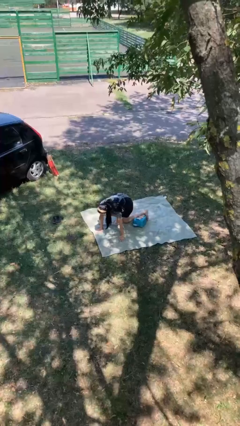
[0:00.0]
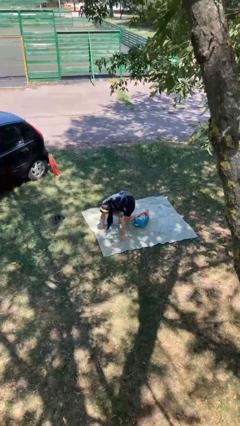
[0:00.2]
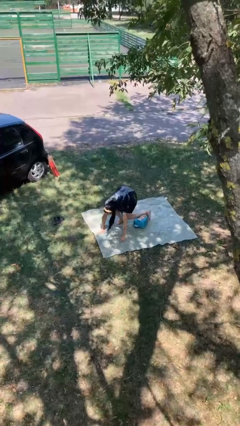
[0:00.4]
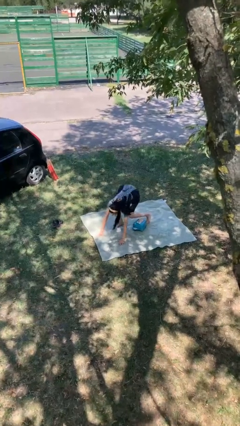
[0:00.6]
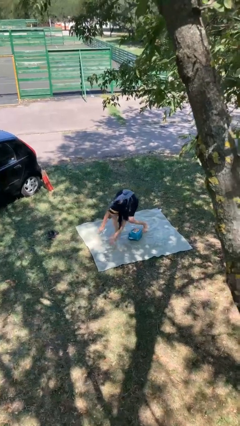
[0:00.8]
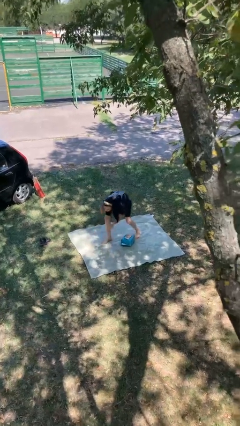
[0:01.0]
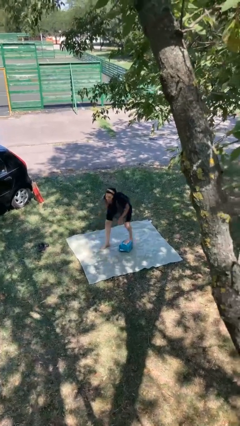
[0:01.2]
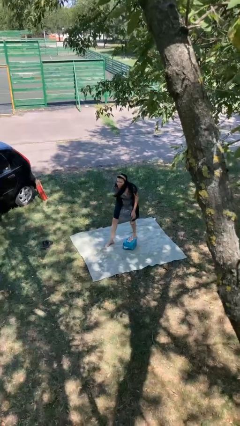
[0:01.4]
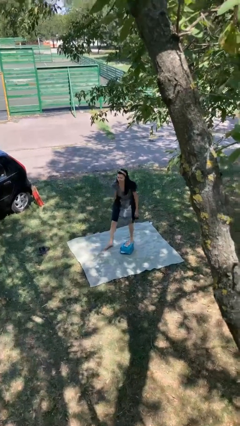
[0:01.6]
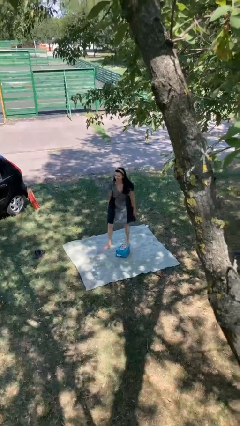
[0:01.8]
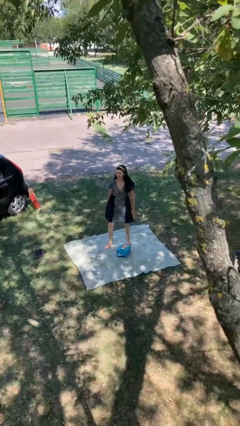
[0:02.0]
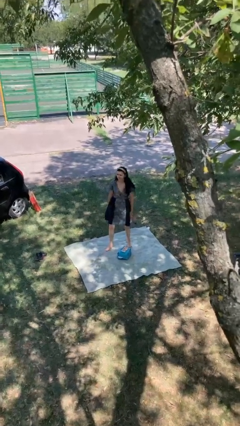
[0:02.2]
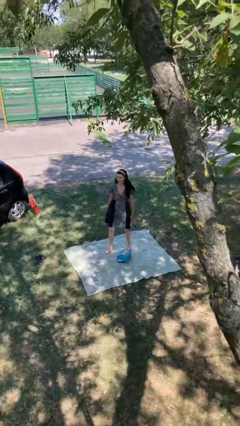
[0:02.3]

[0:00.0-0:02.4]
person stands up from floor

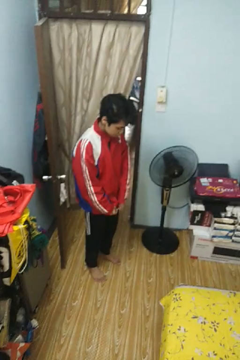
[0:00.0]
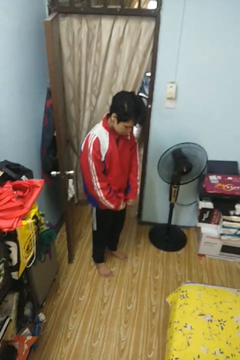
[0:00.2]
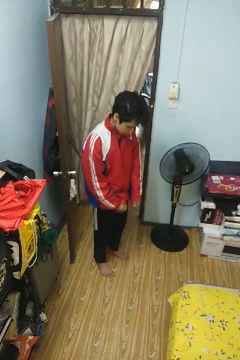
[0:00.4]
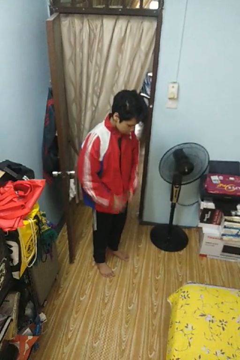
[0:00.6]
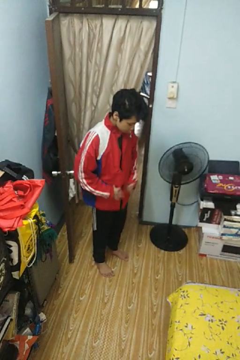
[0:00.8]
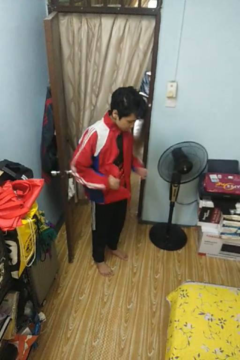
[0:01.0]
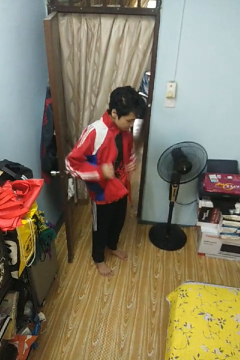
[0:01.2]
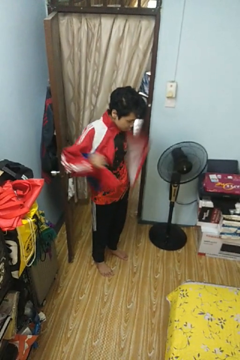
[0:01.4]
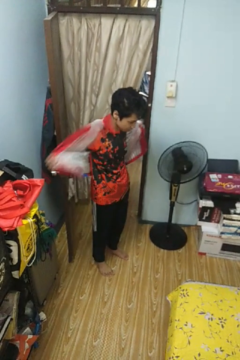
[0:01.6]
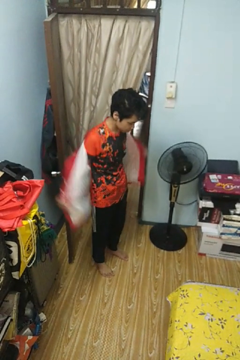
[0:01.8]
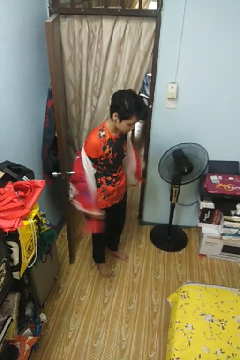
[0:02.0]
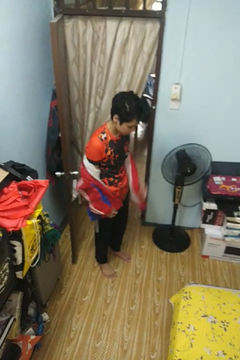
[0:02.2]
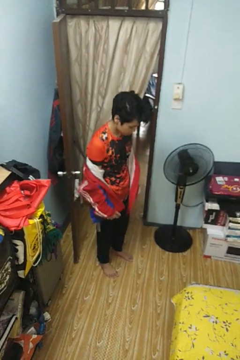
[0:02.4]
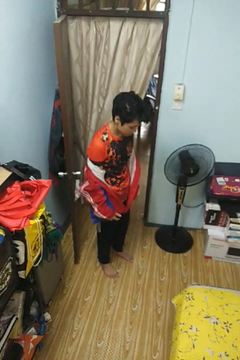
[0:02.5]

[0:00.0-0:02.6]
person takes off jacket

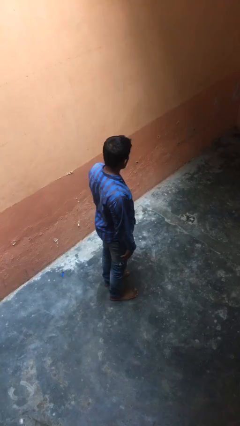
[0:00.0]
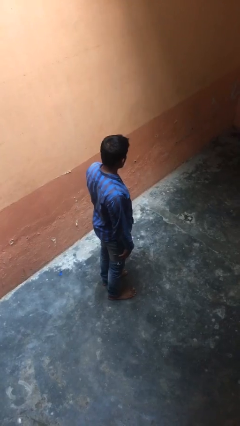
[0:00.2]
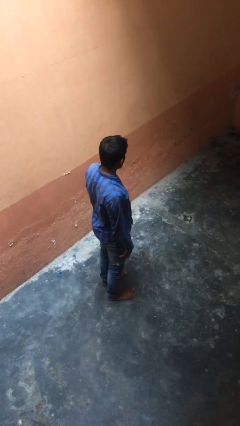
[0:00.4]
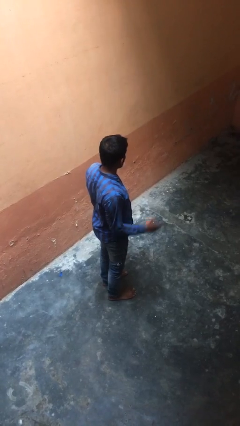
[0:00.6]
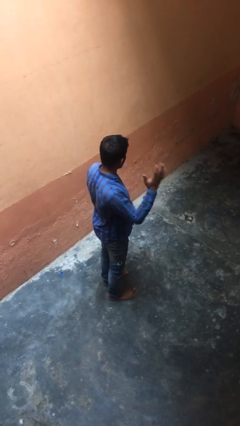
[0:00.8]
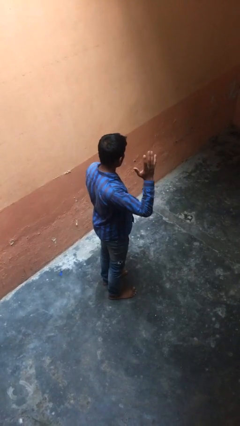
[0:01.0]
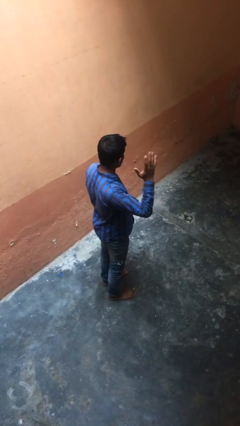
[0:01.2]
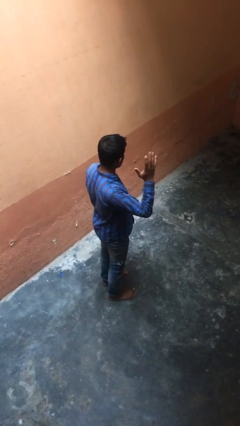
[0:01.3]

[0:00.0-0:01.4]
person gestures number five

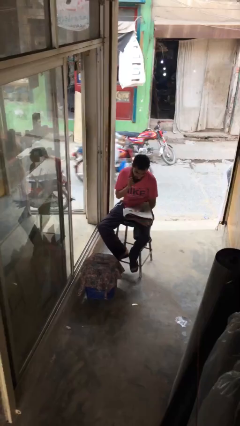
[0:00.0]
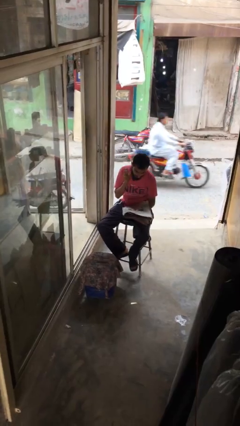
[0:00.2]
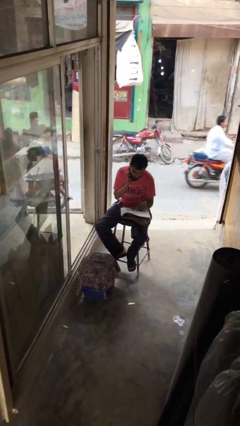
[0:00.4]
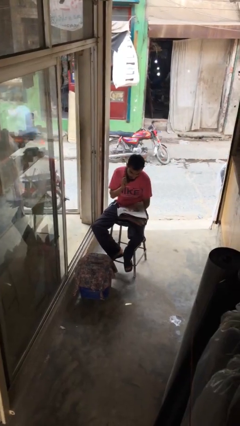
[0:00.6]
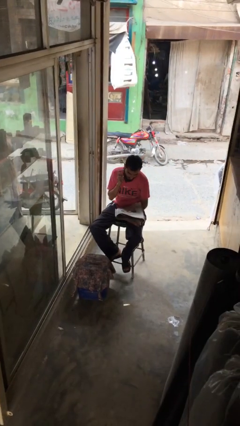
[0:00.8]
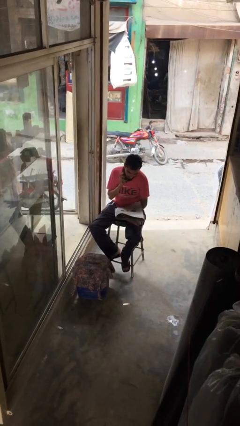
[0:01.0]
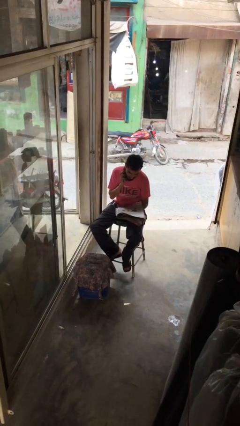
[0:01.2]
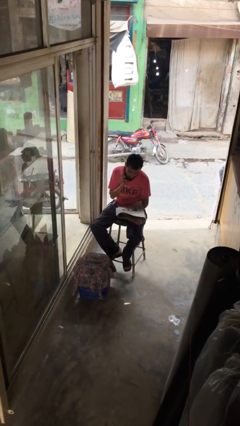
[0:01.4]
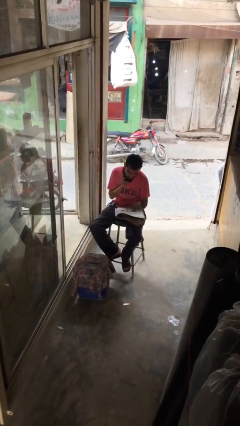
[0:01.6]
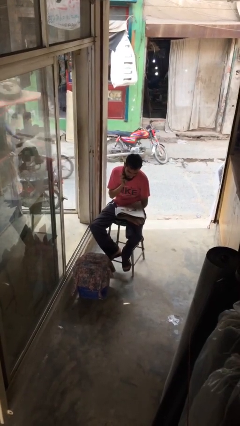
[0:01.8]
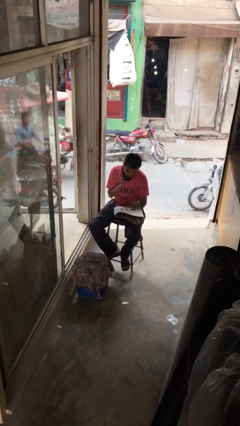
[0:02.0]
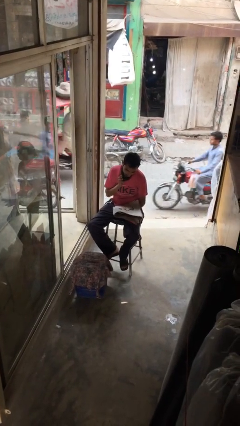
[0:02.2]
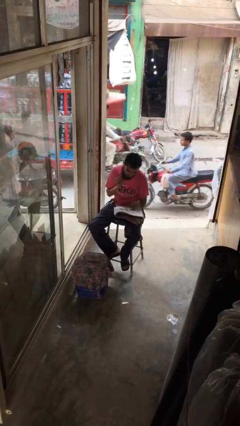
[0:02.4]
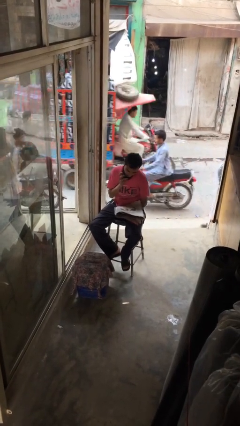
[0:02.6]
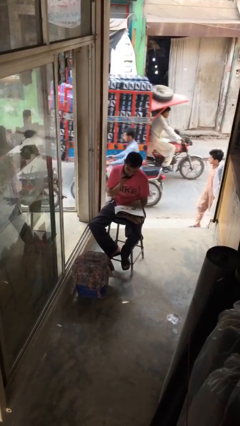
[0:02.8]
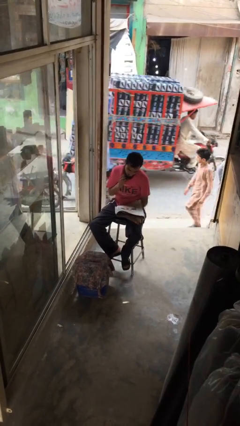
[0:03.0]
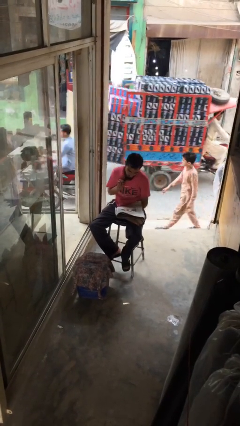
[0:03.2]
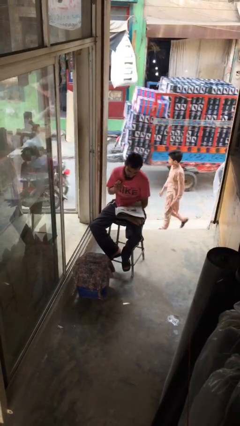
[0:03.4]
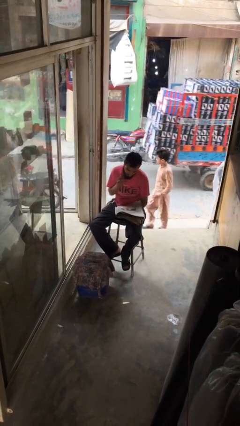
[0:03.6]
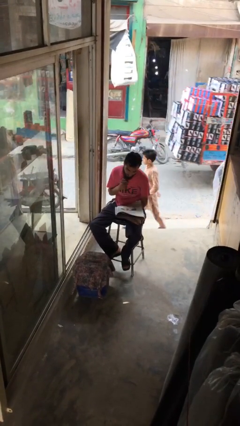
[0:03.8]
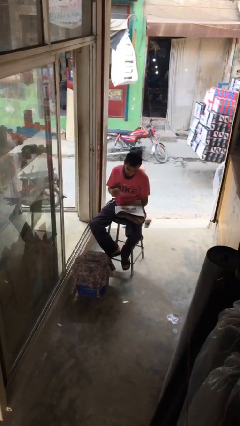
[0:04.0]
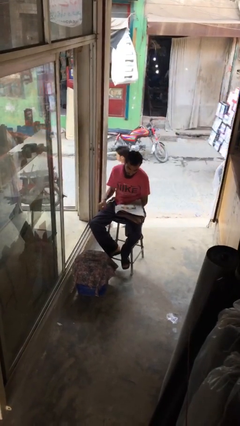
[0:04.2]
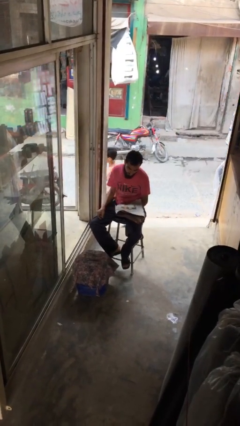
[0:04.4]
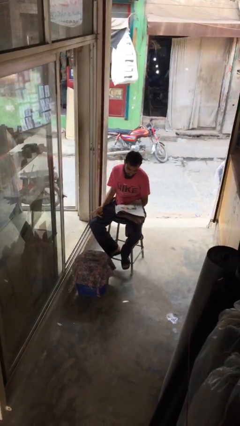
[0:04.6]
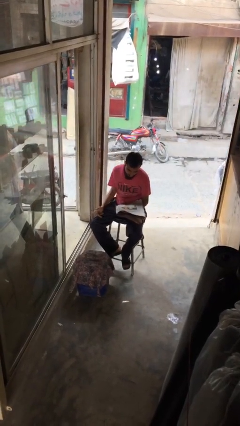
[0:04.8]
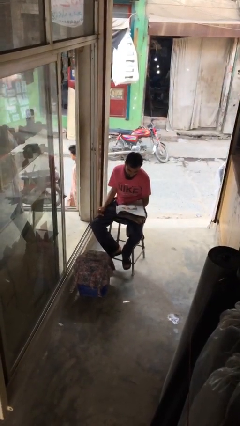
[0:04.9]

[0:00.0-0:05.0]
person reads document

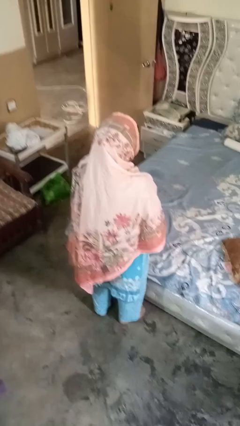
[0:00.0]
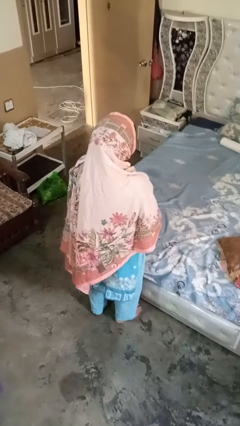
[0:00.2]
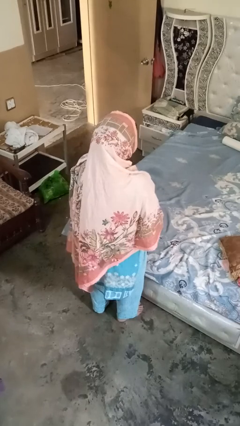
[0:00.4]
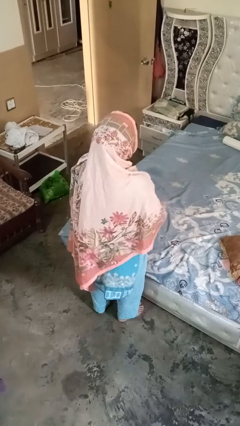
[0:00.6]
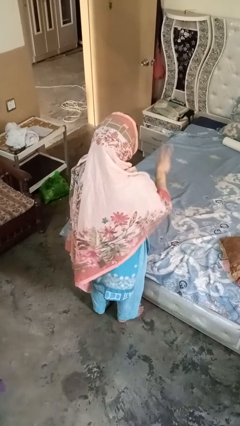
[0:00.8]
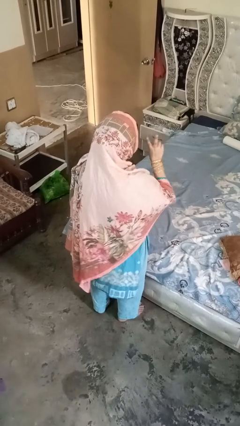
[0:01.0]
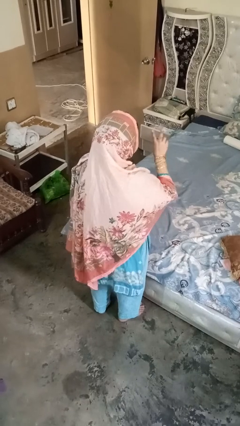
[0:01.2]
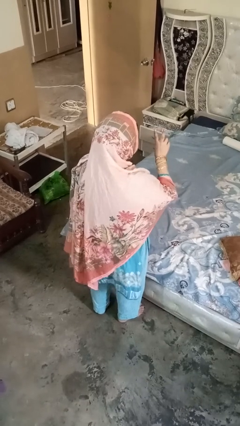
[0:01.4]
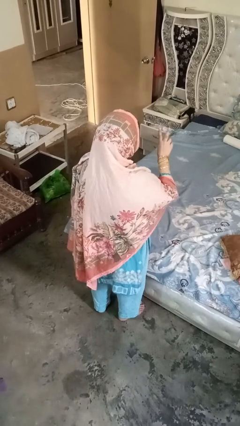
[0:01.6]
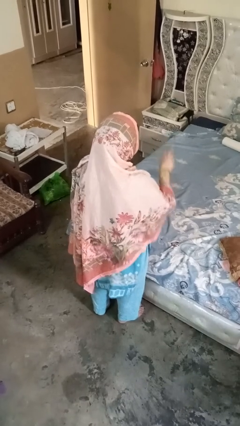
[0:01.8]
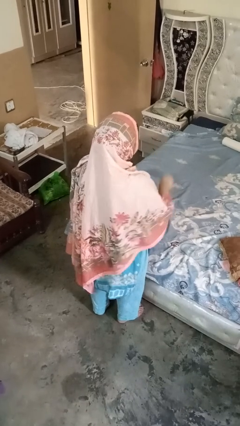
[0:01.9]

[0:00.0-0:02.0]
person gestures be quiet

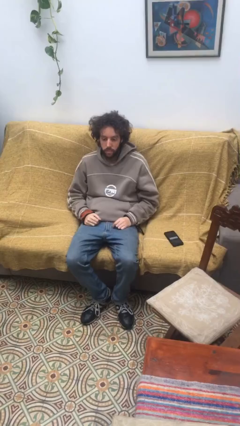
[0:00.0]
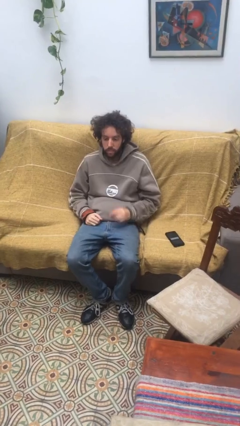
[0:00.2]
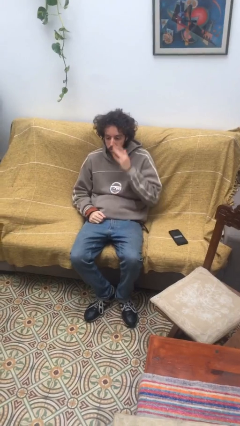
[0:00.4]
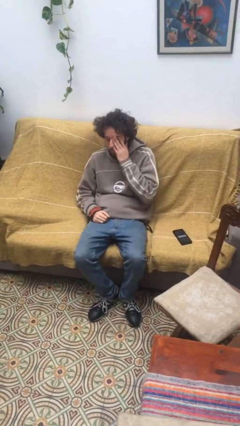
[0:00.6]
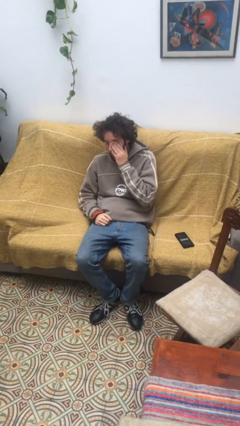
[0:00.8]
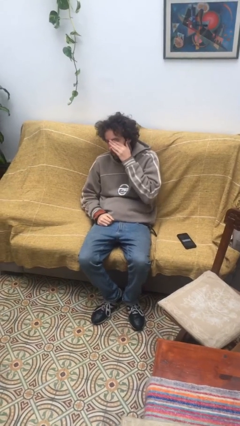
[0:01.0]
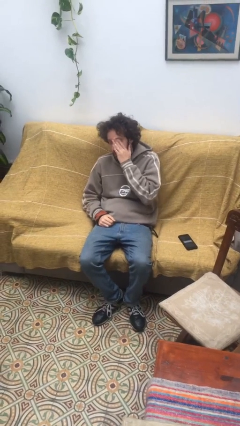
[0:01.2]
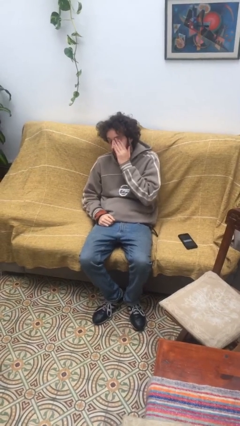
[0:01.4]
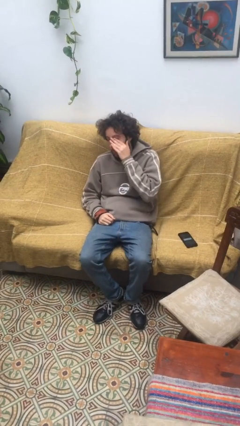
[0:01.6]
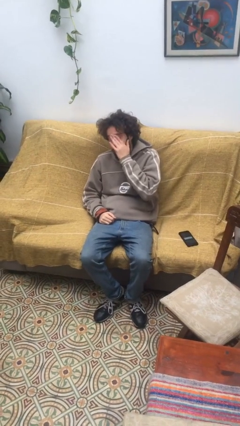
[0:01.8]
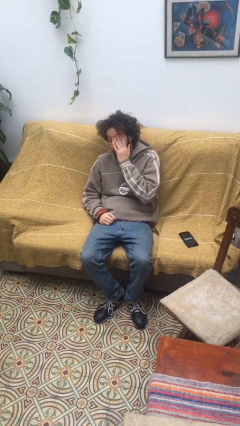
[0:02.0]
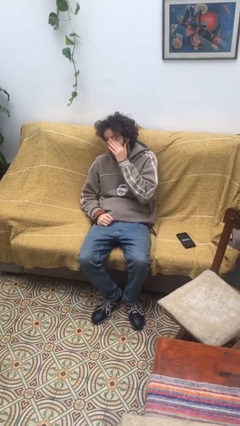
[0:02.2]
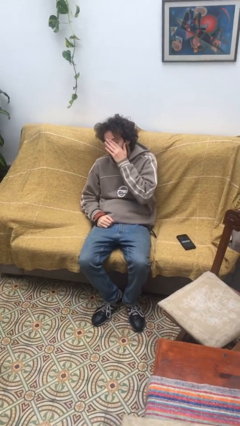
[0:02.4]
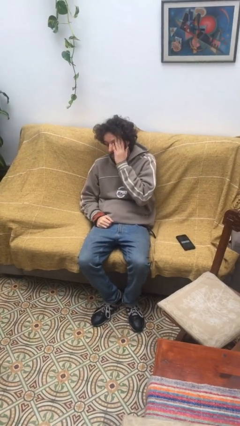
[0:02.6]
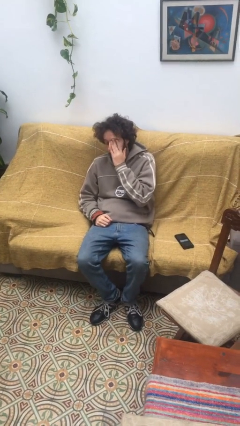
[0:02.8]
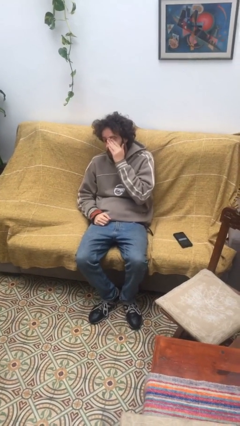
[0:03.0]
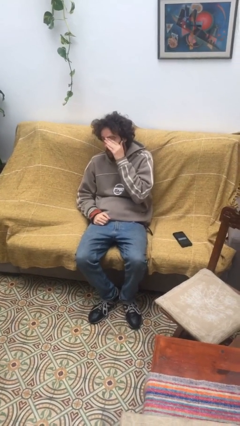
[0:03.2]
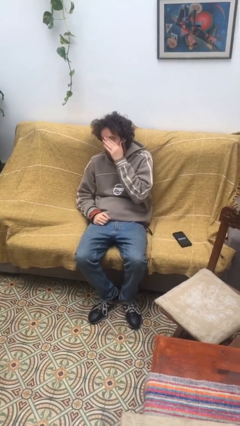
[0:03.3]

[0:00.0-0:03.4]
person rubs eyes

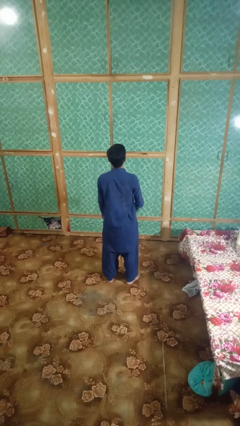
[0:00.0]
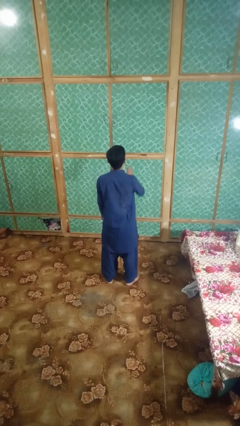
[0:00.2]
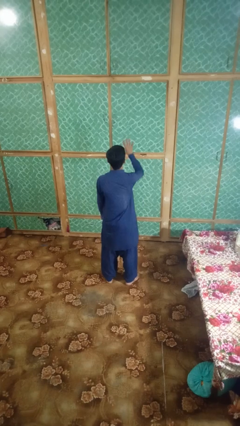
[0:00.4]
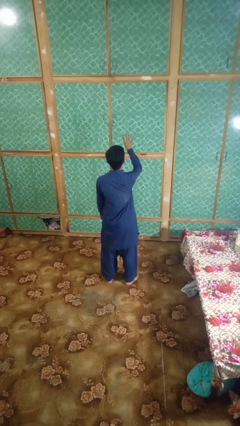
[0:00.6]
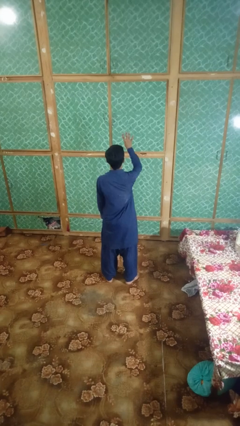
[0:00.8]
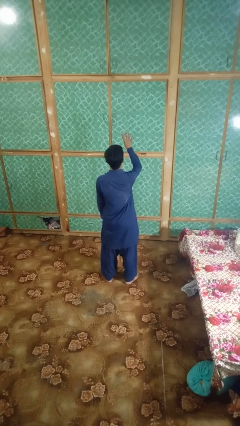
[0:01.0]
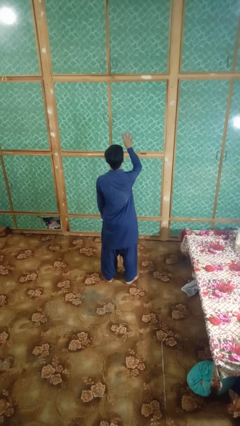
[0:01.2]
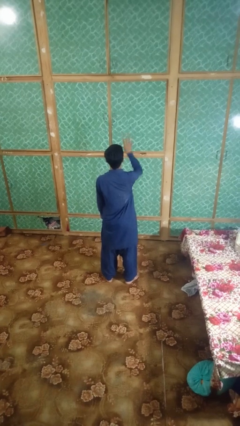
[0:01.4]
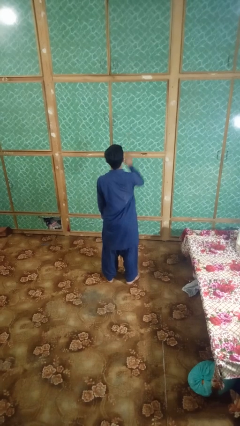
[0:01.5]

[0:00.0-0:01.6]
person gestures number four
